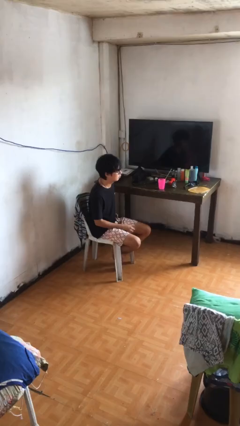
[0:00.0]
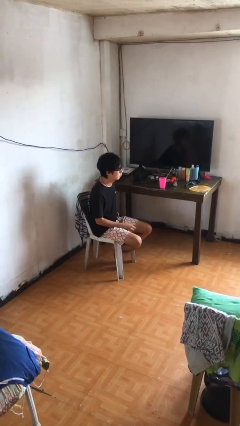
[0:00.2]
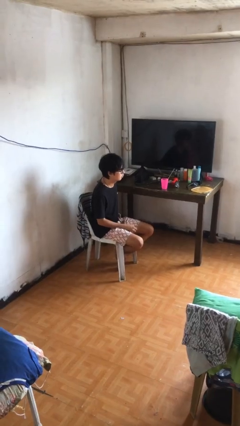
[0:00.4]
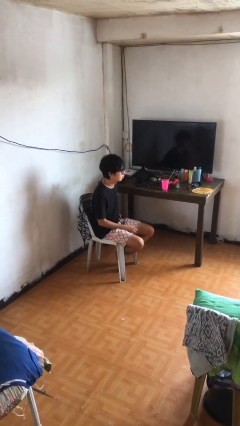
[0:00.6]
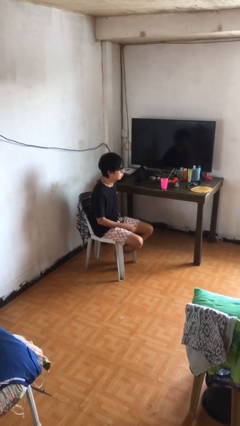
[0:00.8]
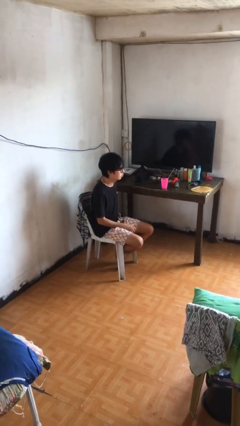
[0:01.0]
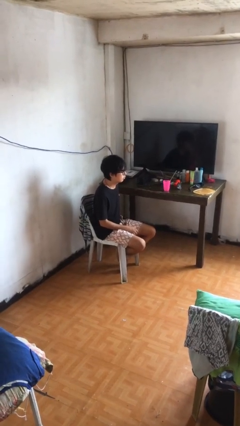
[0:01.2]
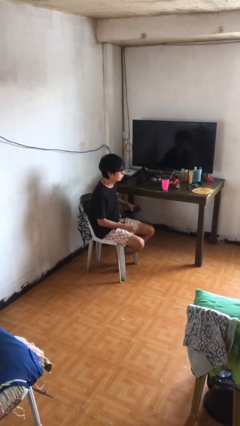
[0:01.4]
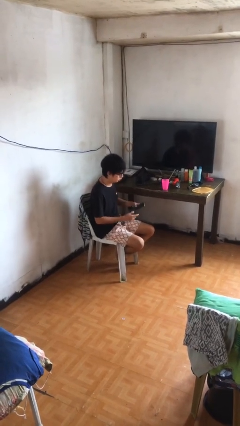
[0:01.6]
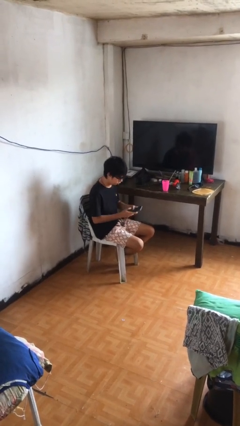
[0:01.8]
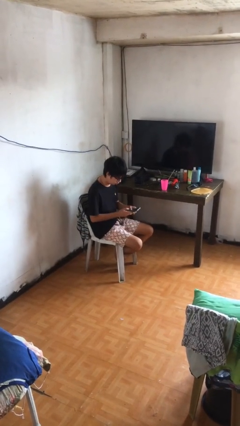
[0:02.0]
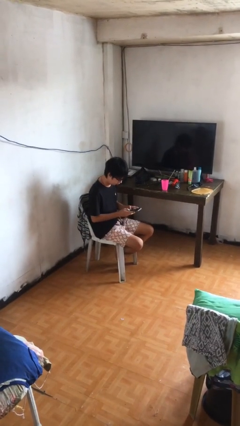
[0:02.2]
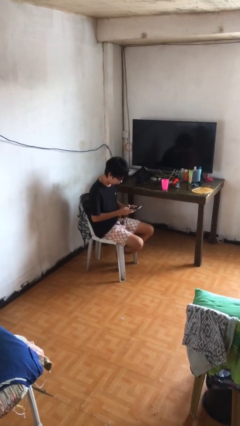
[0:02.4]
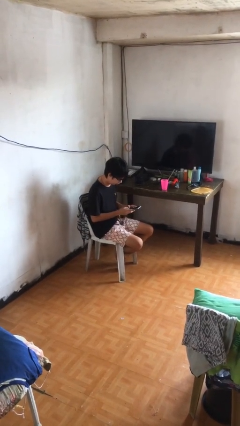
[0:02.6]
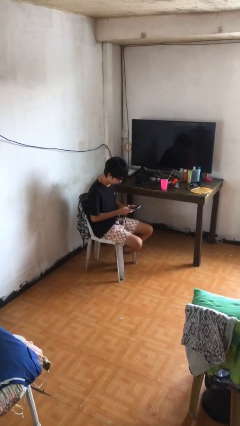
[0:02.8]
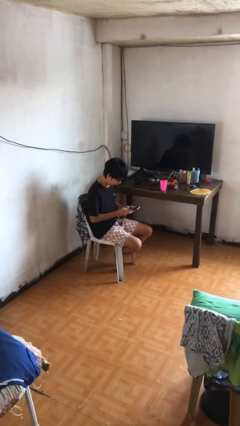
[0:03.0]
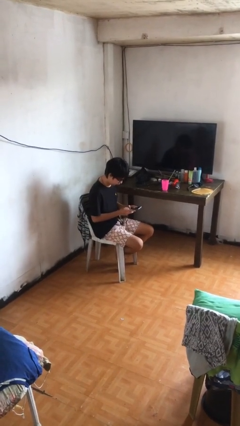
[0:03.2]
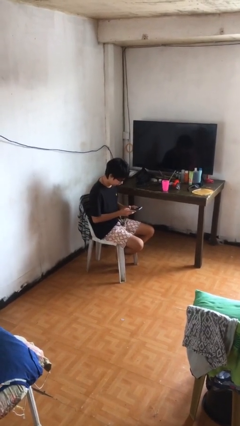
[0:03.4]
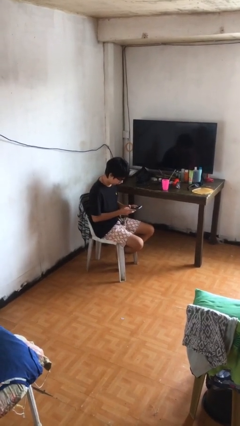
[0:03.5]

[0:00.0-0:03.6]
person takes phone from pocket

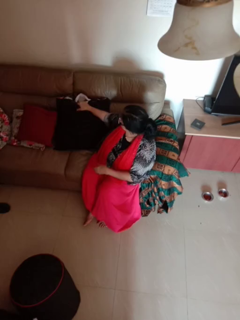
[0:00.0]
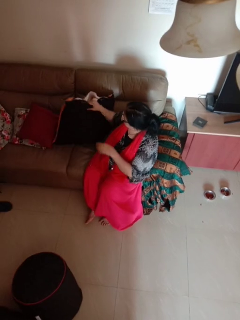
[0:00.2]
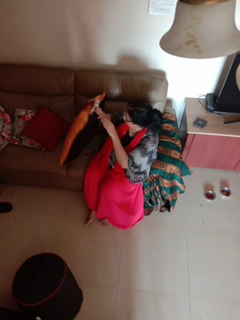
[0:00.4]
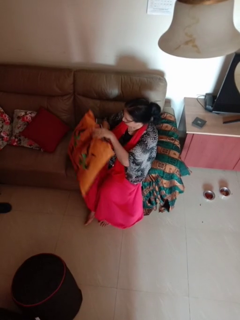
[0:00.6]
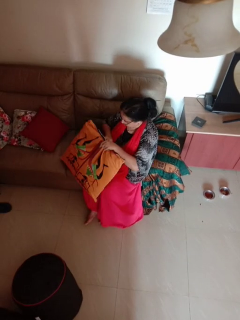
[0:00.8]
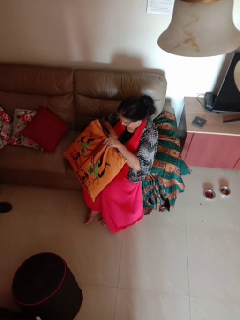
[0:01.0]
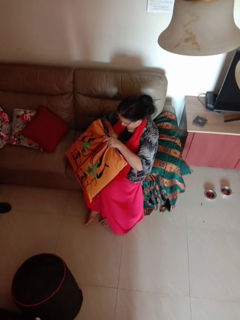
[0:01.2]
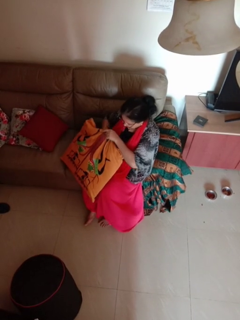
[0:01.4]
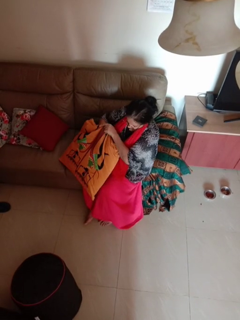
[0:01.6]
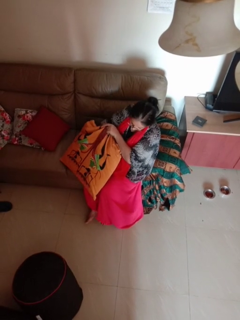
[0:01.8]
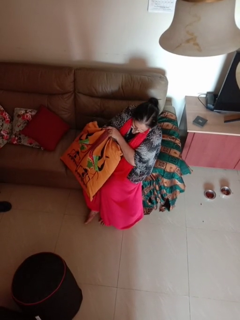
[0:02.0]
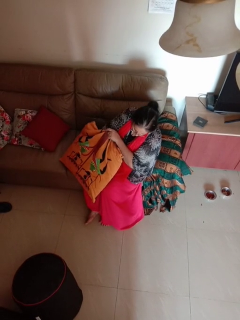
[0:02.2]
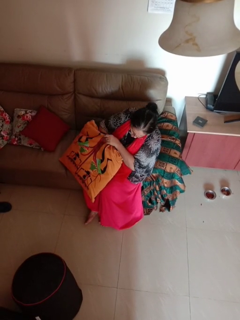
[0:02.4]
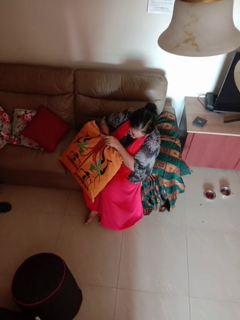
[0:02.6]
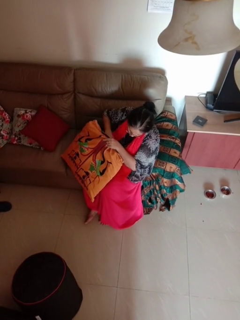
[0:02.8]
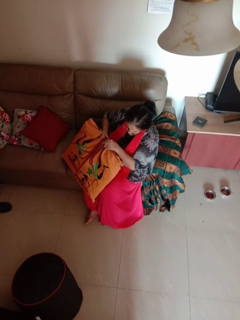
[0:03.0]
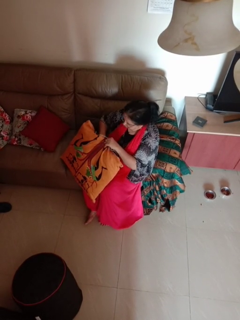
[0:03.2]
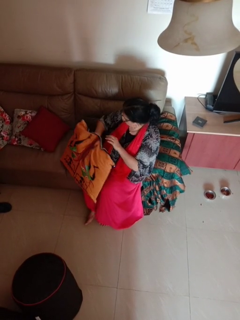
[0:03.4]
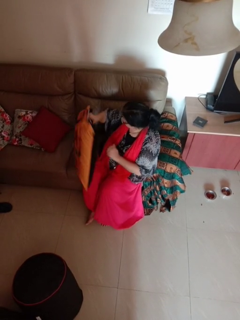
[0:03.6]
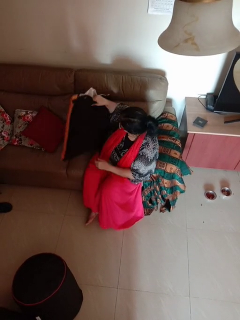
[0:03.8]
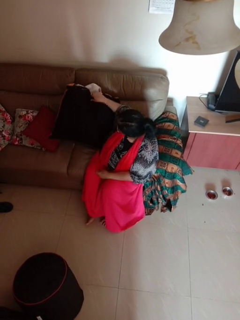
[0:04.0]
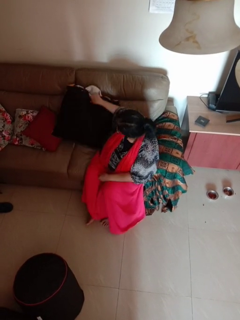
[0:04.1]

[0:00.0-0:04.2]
person searches in couch

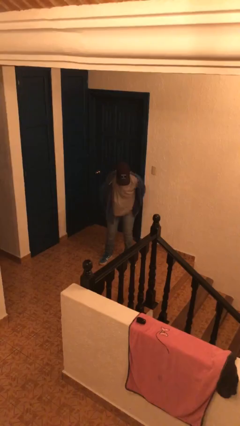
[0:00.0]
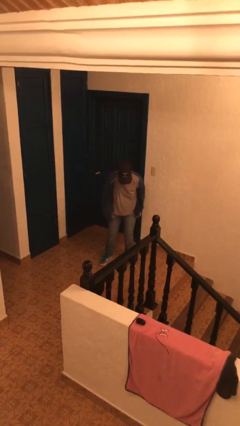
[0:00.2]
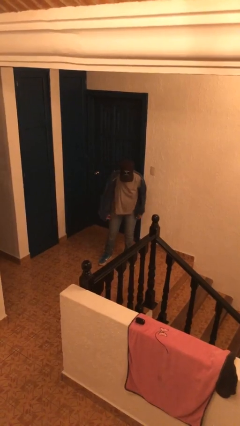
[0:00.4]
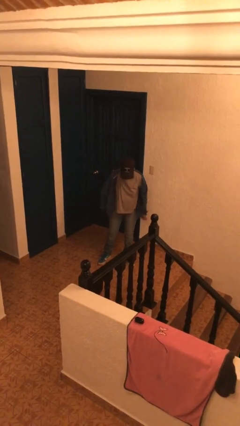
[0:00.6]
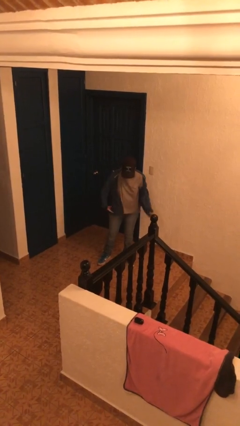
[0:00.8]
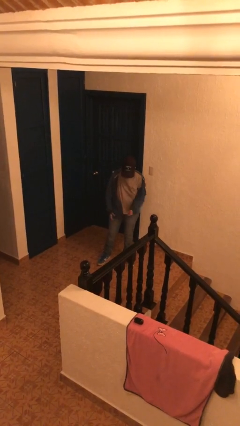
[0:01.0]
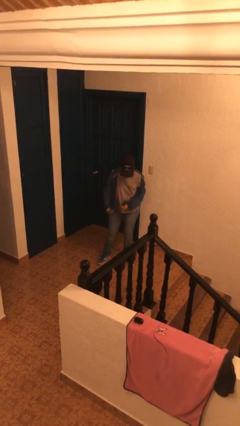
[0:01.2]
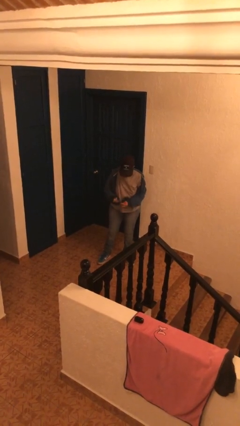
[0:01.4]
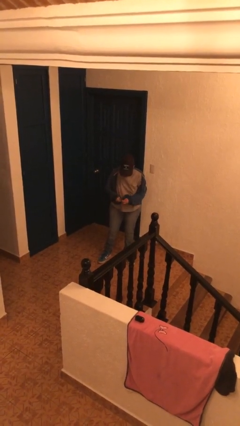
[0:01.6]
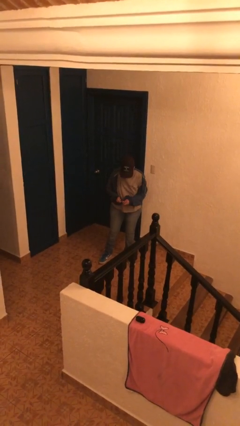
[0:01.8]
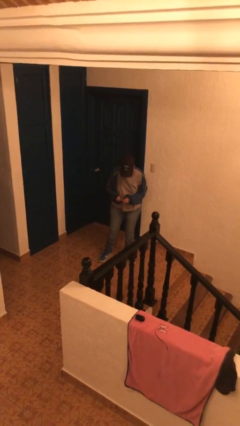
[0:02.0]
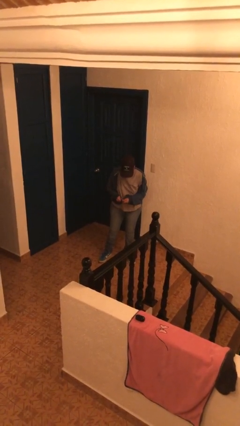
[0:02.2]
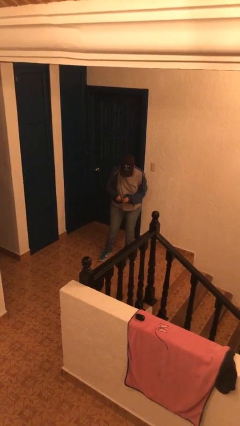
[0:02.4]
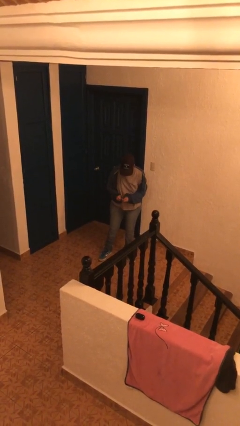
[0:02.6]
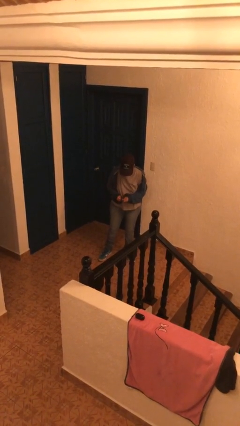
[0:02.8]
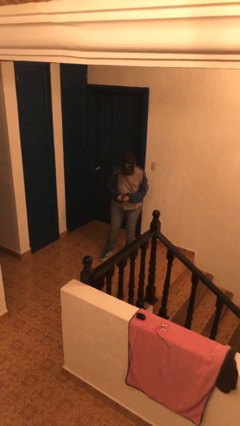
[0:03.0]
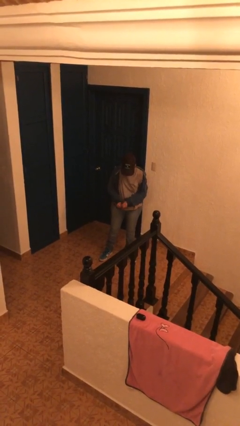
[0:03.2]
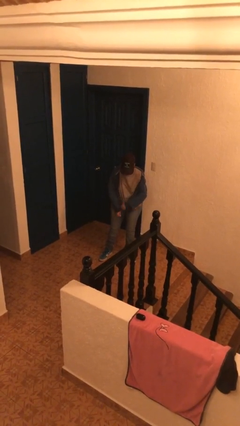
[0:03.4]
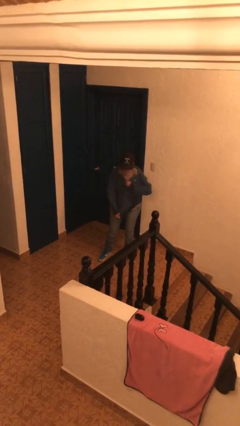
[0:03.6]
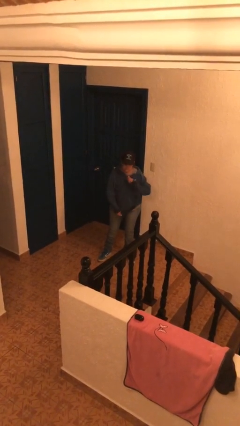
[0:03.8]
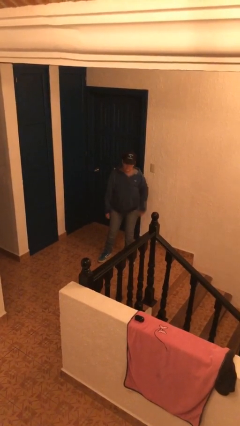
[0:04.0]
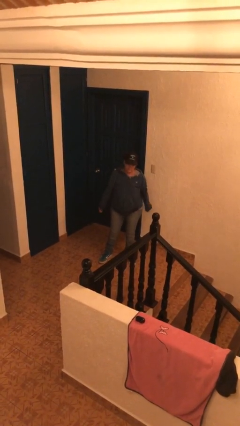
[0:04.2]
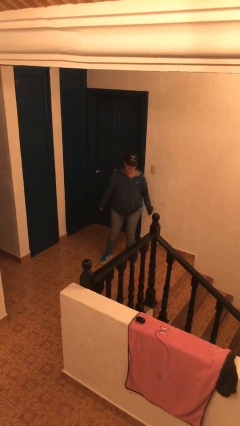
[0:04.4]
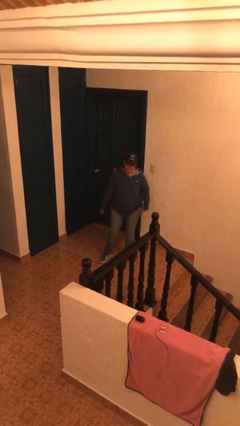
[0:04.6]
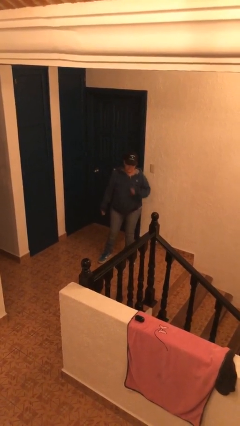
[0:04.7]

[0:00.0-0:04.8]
person zips up jacket

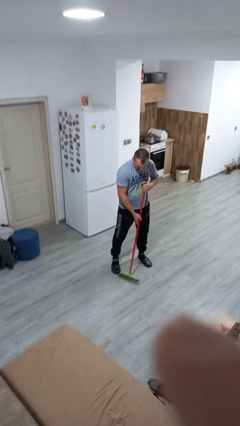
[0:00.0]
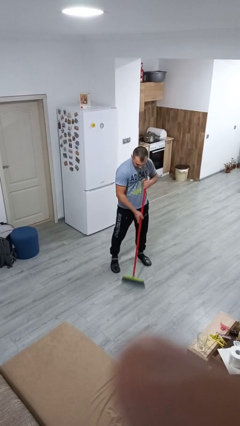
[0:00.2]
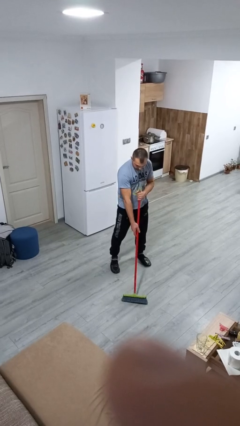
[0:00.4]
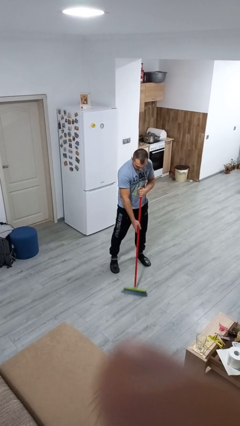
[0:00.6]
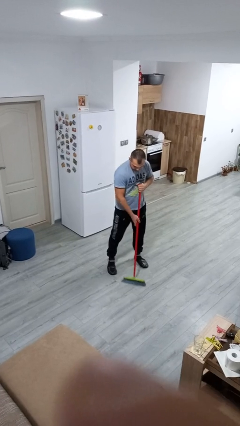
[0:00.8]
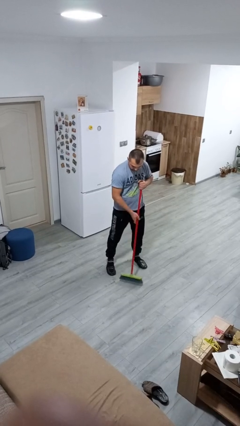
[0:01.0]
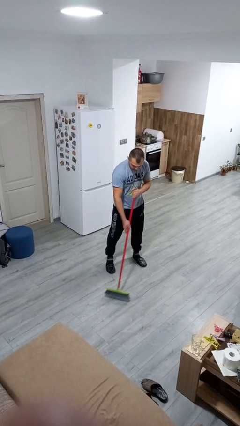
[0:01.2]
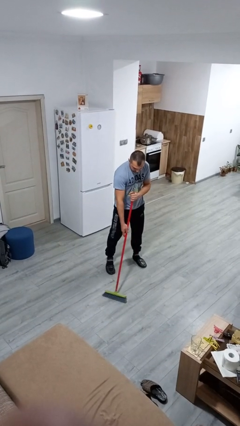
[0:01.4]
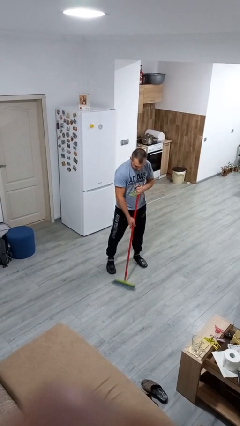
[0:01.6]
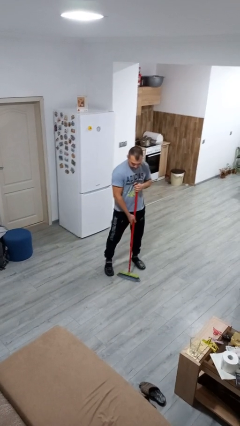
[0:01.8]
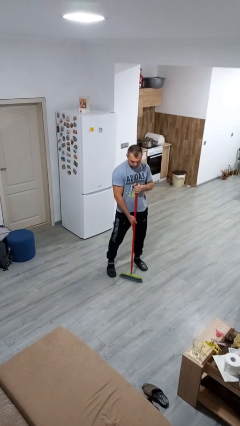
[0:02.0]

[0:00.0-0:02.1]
person sweeps floor

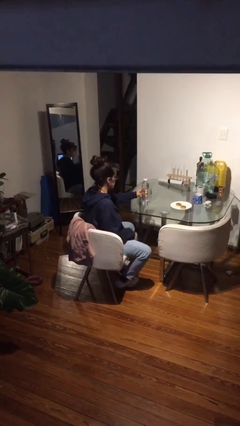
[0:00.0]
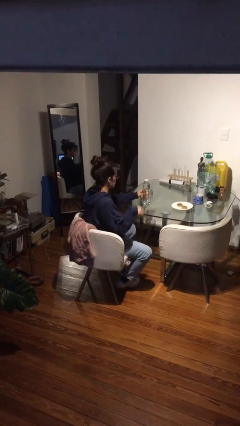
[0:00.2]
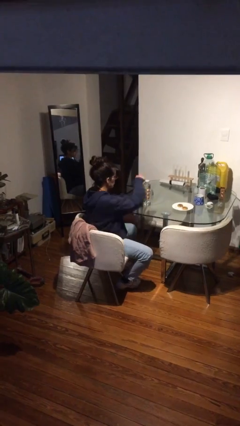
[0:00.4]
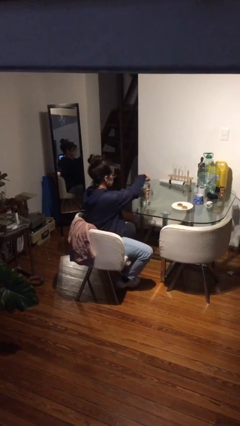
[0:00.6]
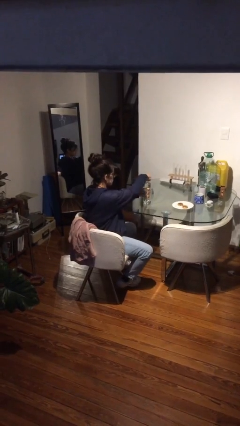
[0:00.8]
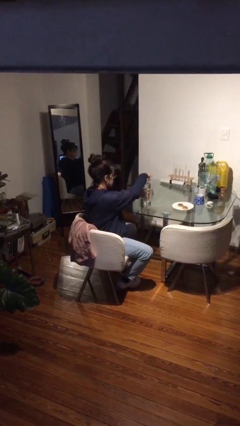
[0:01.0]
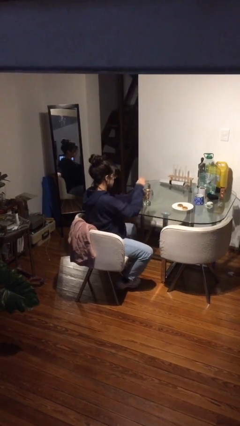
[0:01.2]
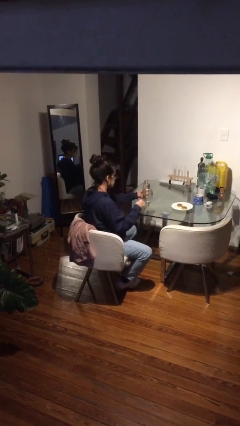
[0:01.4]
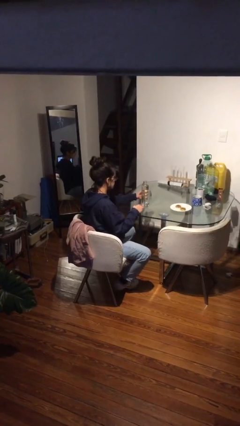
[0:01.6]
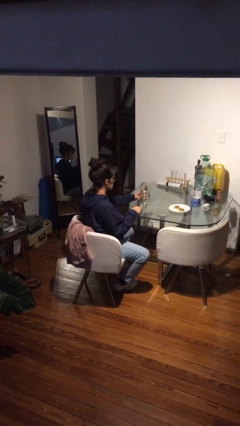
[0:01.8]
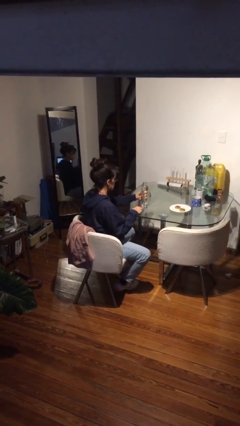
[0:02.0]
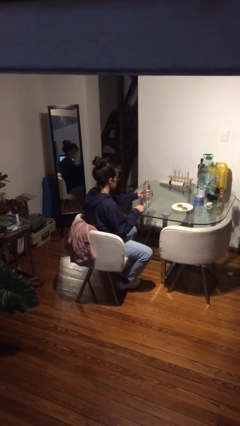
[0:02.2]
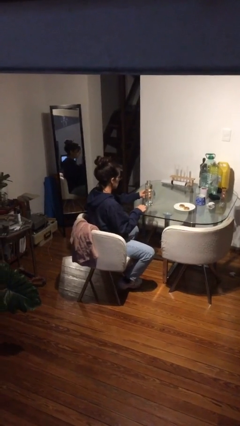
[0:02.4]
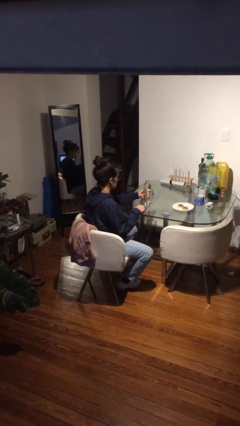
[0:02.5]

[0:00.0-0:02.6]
person unscrews lid from bottle

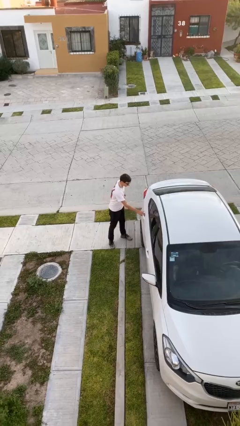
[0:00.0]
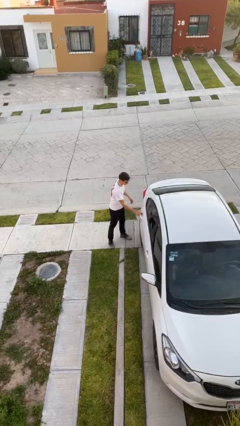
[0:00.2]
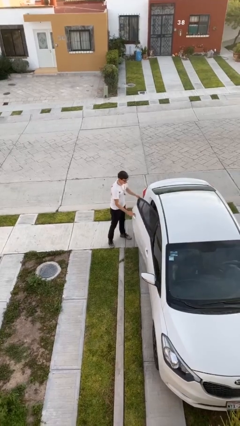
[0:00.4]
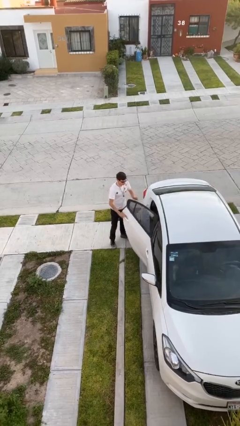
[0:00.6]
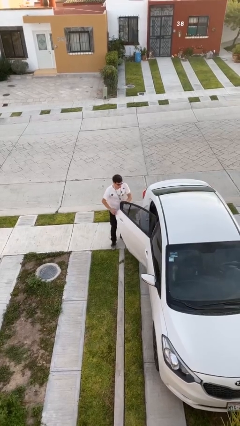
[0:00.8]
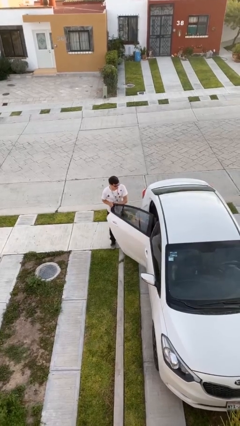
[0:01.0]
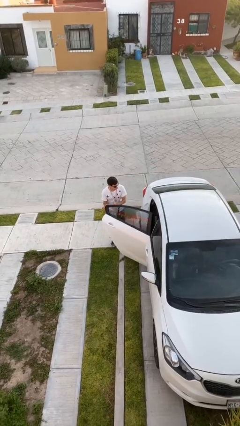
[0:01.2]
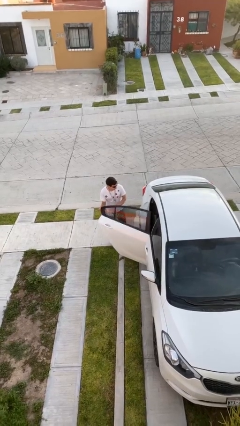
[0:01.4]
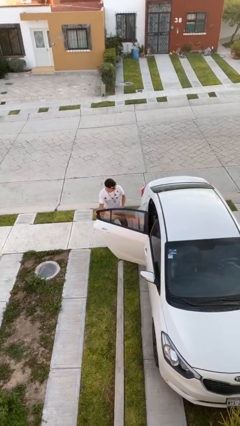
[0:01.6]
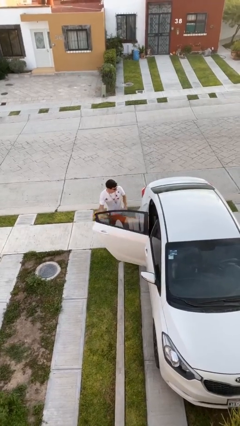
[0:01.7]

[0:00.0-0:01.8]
person opens car door
